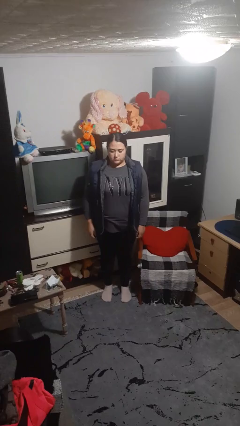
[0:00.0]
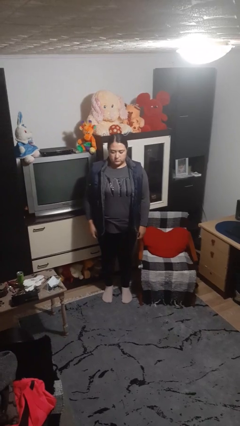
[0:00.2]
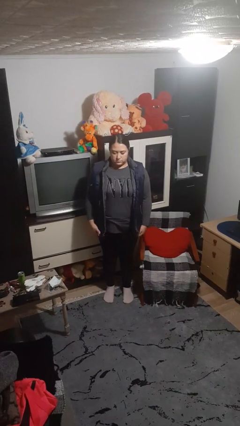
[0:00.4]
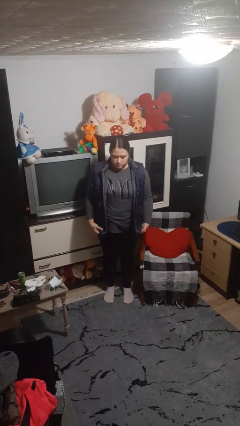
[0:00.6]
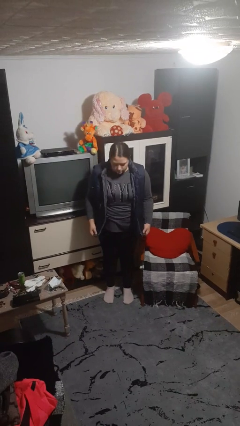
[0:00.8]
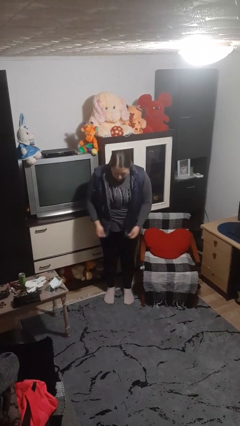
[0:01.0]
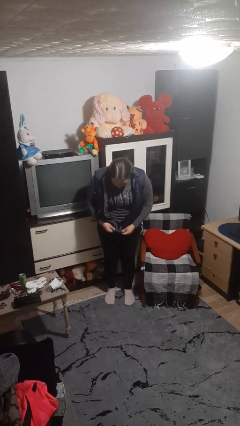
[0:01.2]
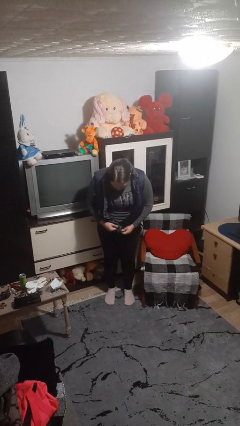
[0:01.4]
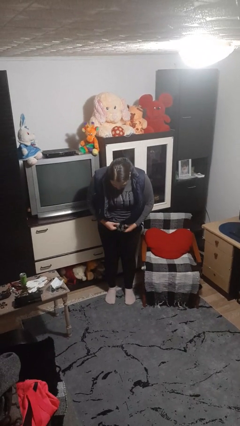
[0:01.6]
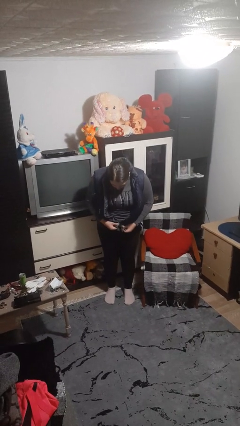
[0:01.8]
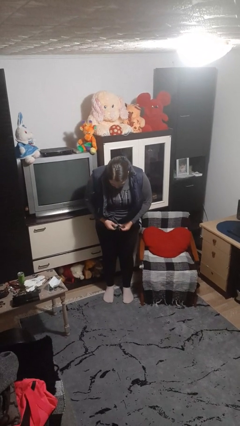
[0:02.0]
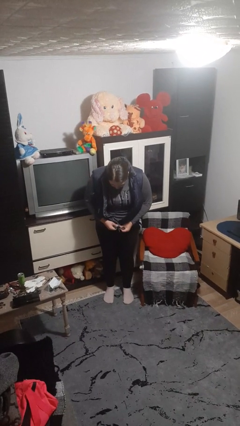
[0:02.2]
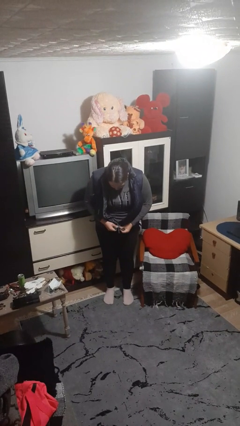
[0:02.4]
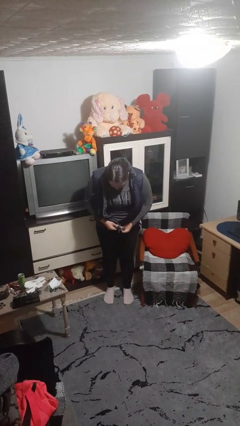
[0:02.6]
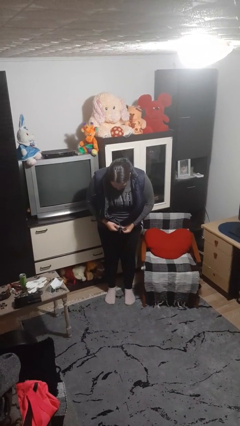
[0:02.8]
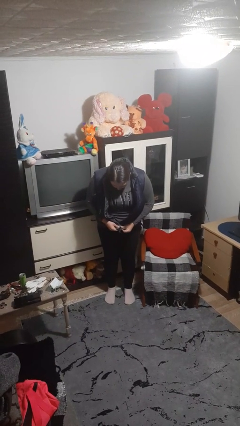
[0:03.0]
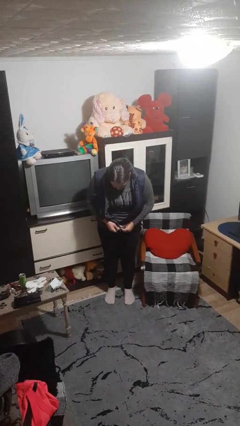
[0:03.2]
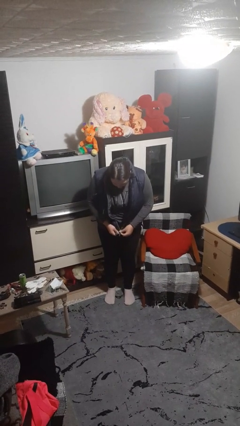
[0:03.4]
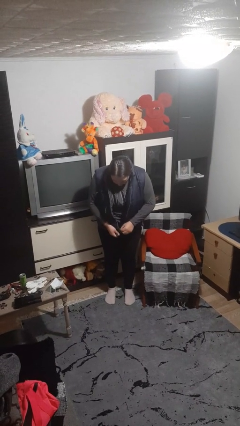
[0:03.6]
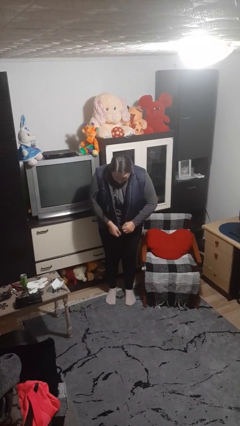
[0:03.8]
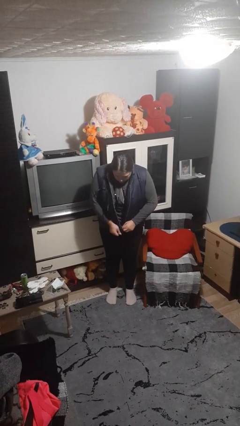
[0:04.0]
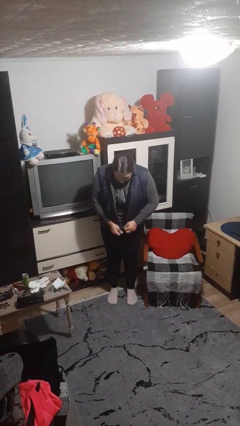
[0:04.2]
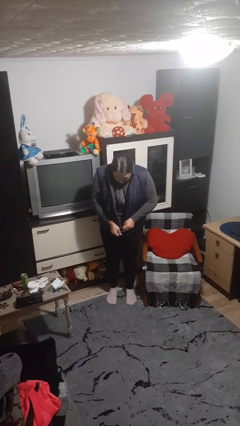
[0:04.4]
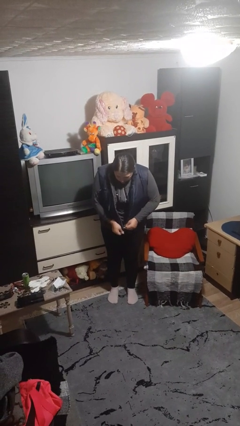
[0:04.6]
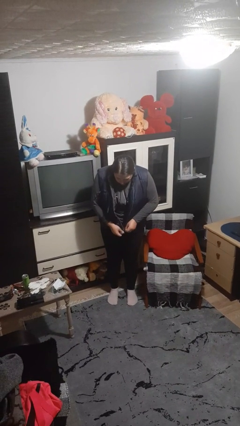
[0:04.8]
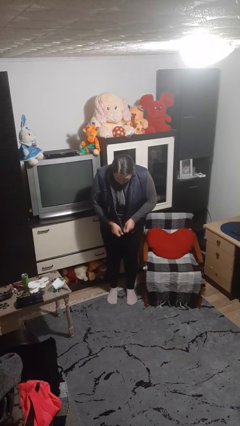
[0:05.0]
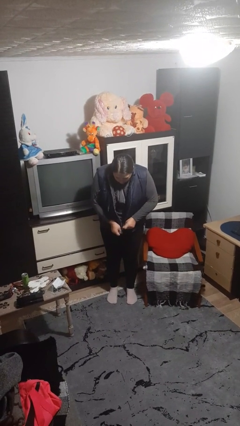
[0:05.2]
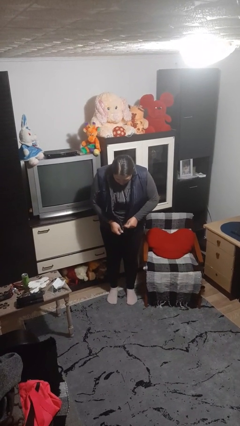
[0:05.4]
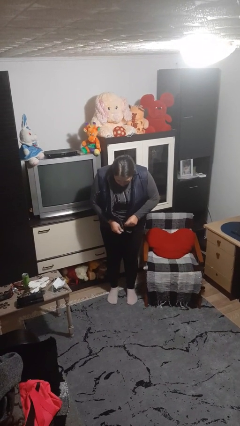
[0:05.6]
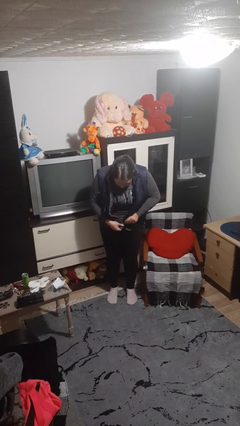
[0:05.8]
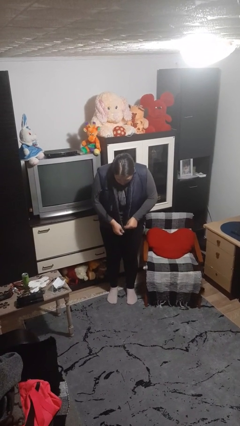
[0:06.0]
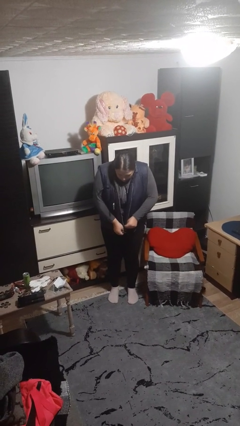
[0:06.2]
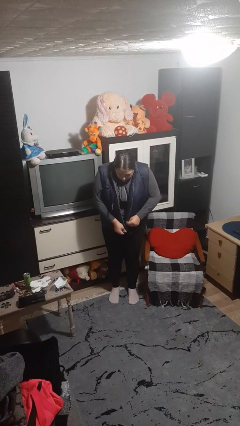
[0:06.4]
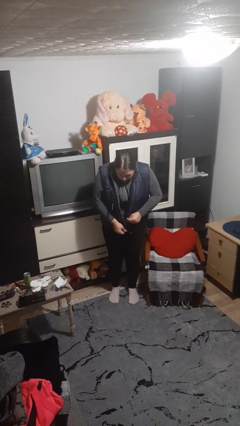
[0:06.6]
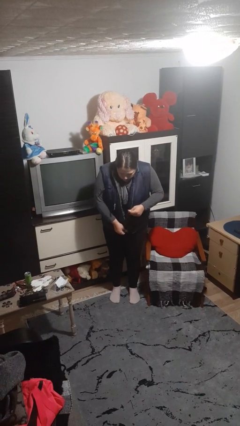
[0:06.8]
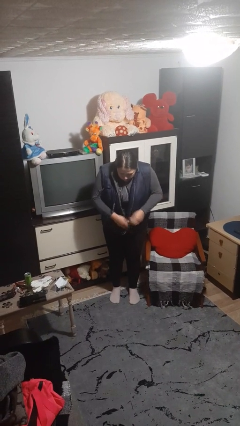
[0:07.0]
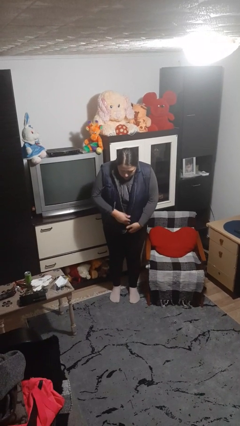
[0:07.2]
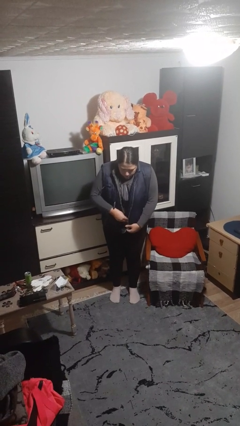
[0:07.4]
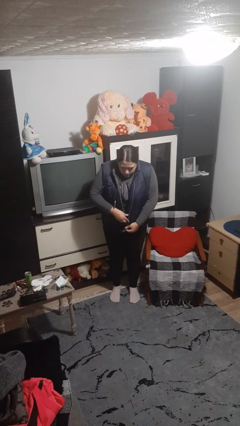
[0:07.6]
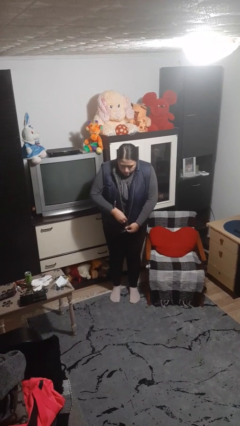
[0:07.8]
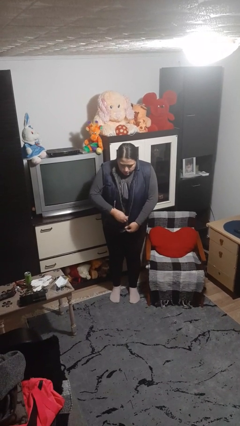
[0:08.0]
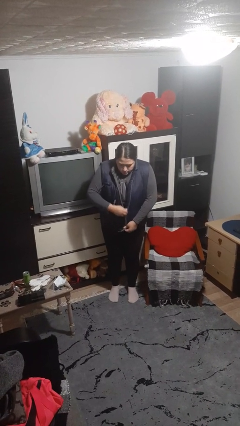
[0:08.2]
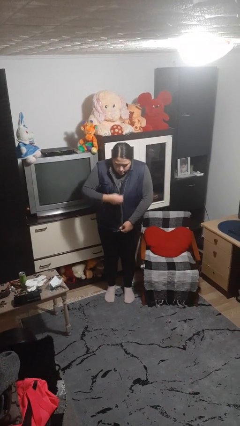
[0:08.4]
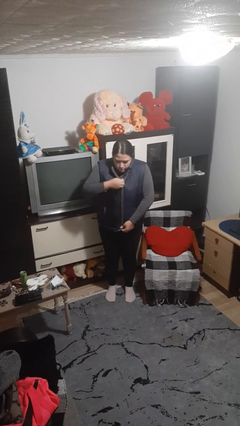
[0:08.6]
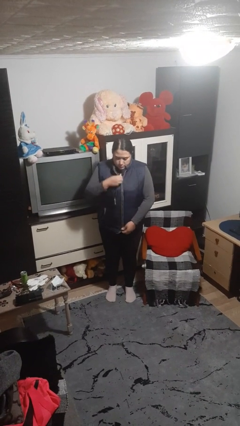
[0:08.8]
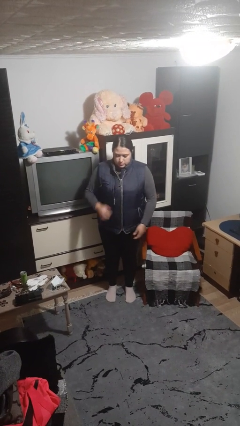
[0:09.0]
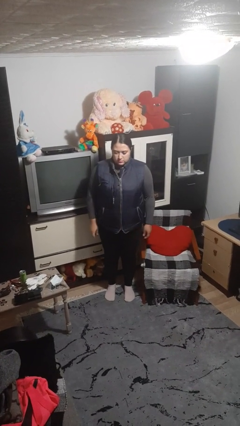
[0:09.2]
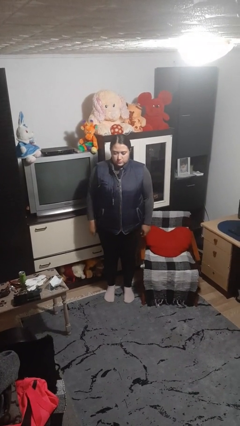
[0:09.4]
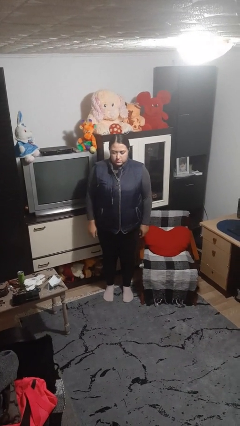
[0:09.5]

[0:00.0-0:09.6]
person zips up jacket

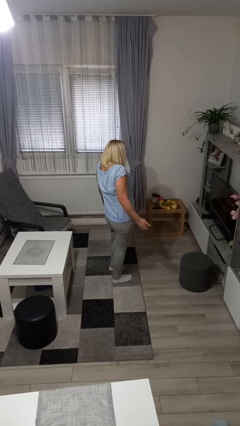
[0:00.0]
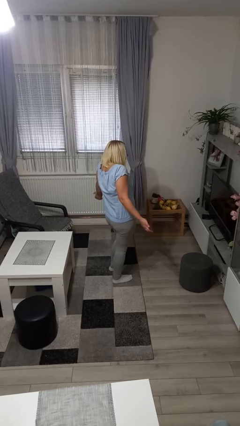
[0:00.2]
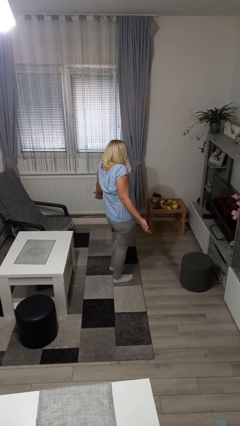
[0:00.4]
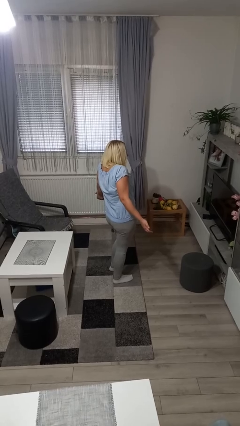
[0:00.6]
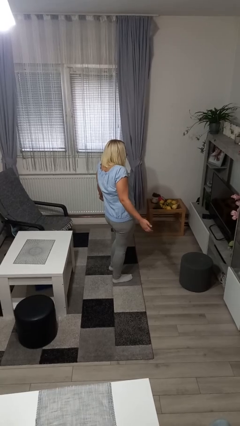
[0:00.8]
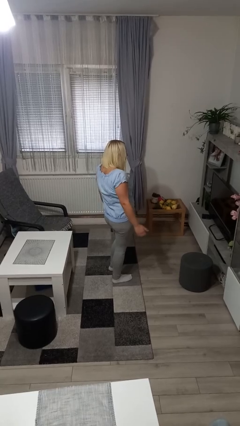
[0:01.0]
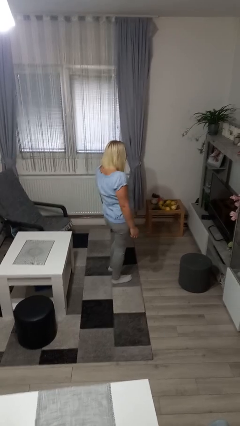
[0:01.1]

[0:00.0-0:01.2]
person shrugs

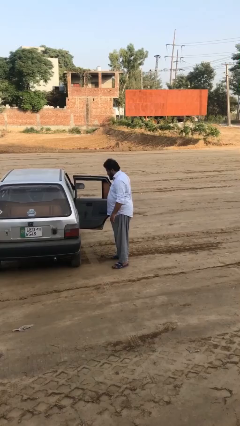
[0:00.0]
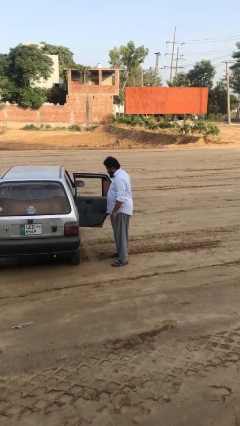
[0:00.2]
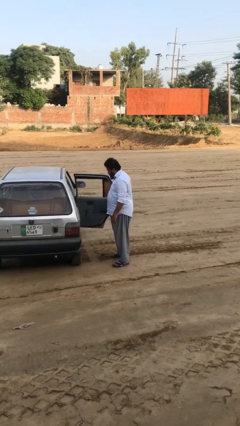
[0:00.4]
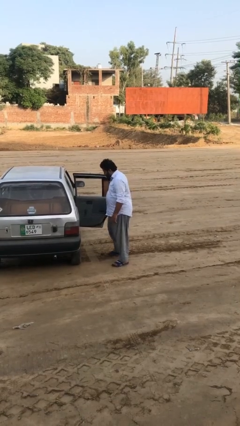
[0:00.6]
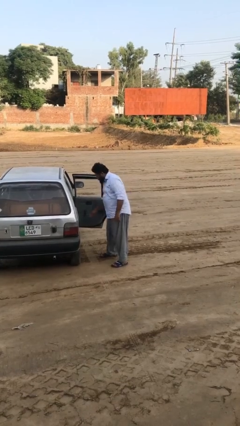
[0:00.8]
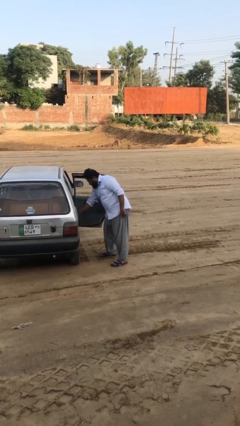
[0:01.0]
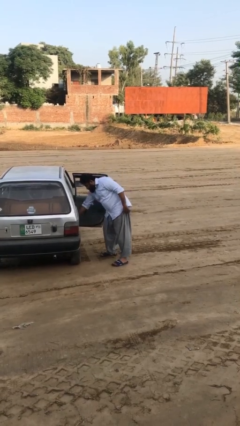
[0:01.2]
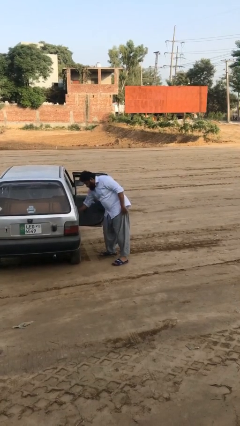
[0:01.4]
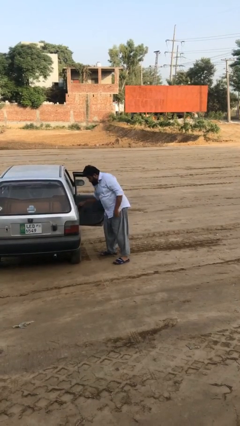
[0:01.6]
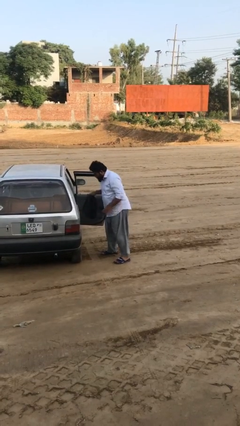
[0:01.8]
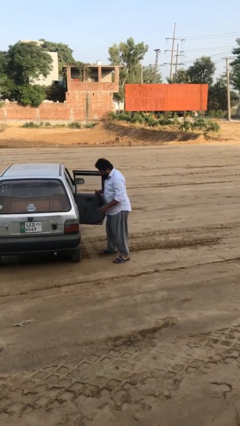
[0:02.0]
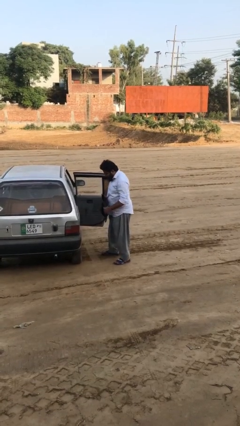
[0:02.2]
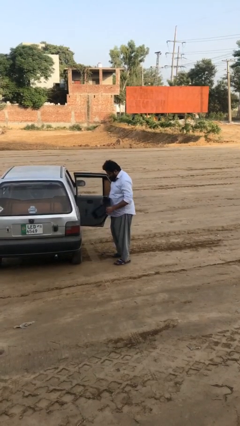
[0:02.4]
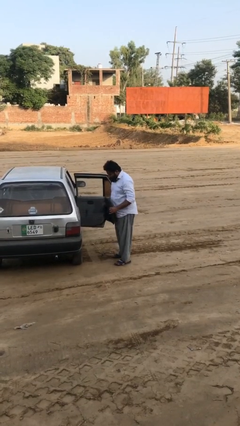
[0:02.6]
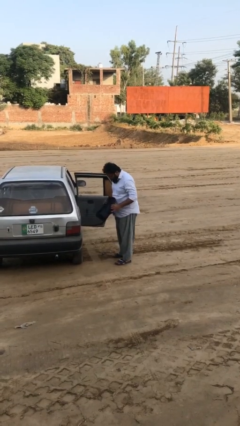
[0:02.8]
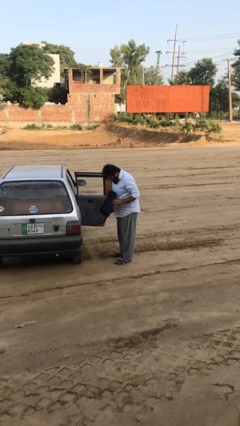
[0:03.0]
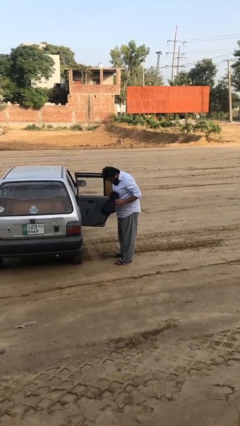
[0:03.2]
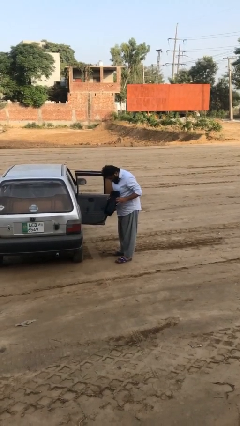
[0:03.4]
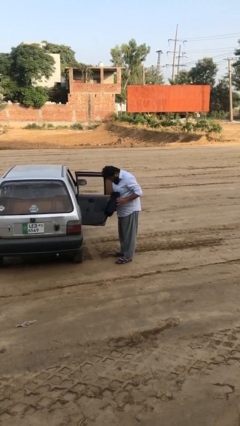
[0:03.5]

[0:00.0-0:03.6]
person unloads car

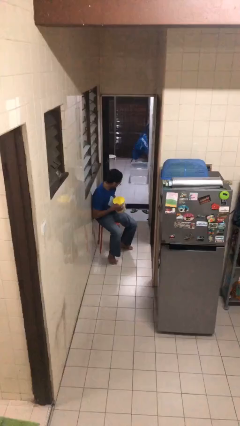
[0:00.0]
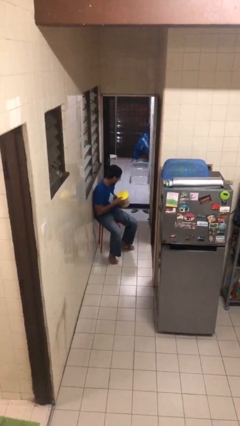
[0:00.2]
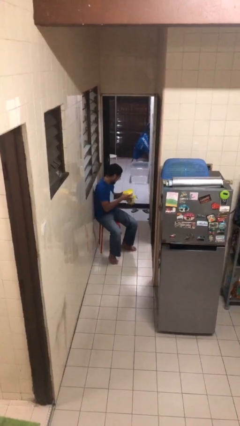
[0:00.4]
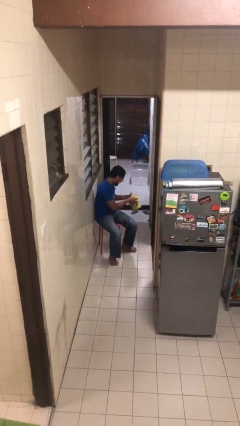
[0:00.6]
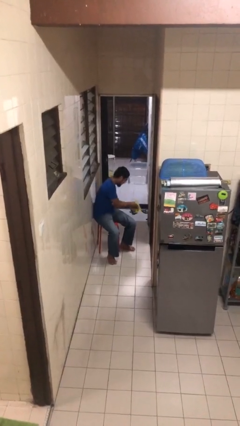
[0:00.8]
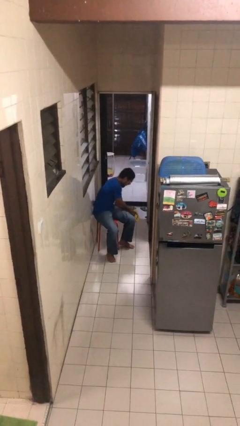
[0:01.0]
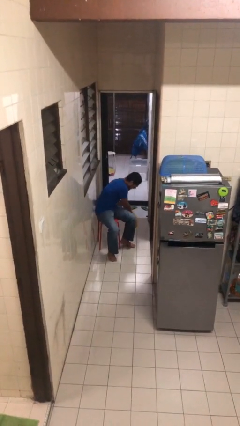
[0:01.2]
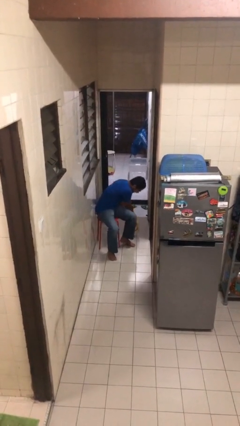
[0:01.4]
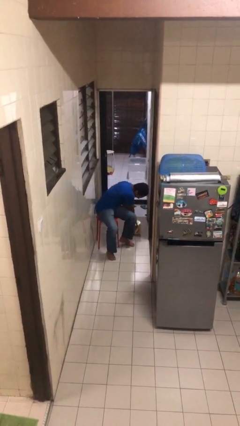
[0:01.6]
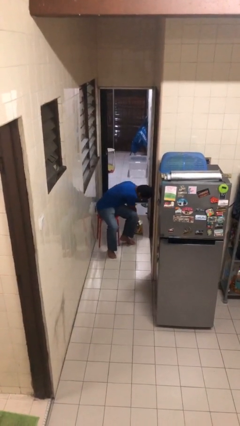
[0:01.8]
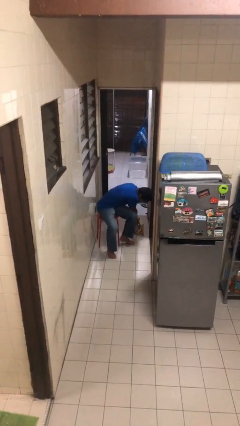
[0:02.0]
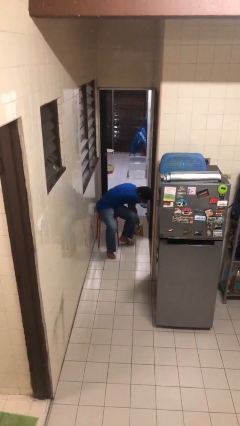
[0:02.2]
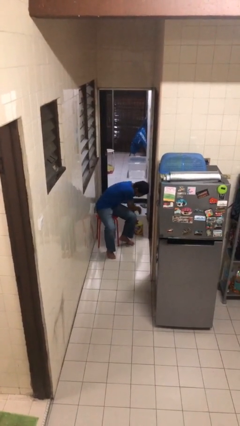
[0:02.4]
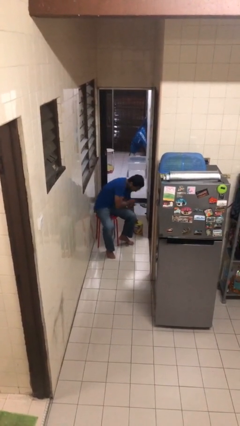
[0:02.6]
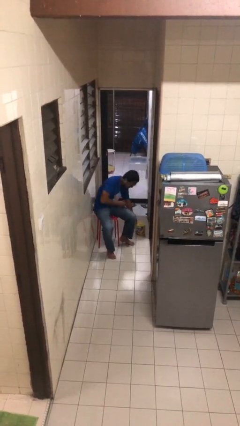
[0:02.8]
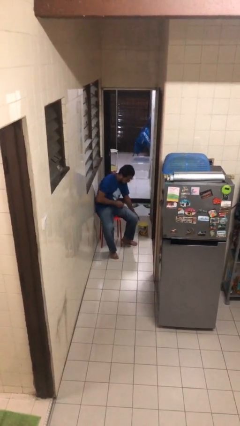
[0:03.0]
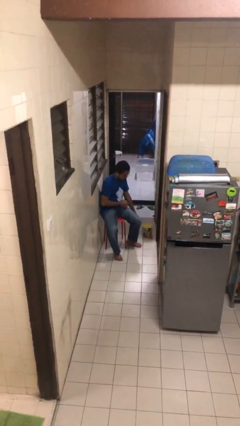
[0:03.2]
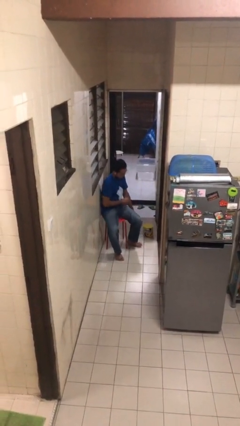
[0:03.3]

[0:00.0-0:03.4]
person puts down object on floor

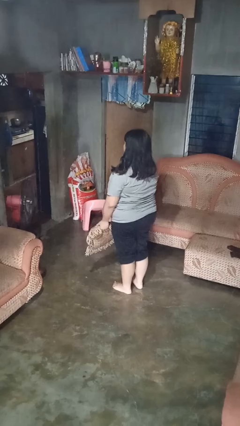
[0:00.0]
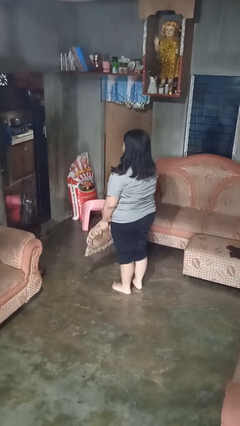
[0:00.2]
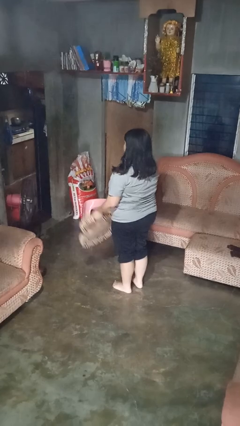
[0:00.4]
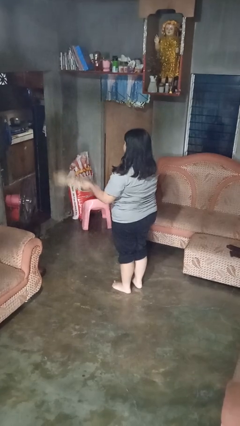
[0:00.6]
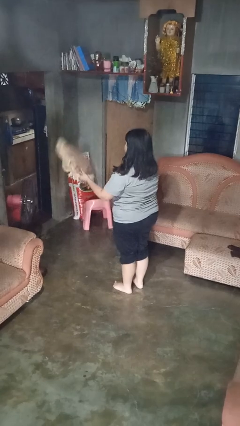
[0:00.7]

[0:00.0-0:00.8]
person throws object into air
